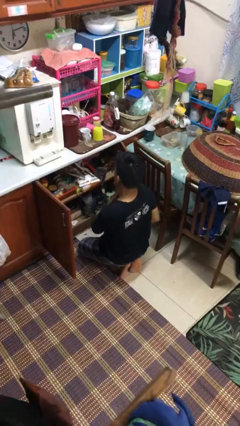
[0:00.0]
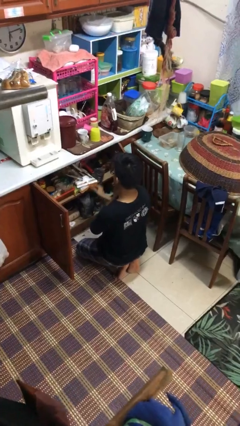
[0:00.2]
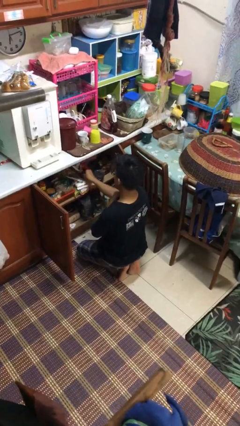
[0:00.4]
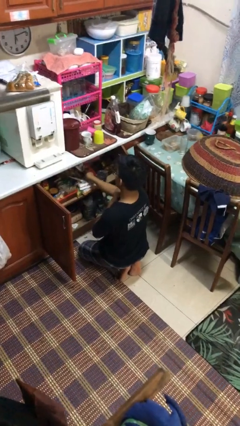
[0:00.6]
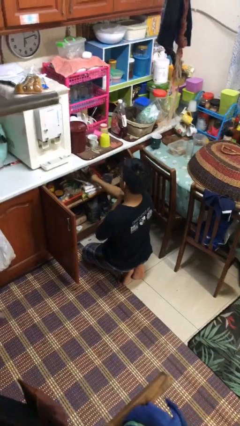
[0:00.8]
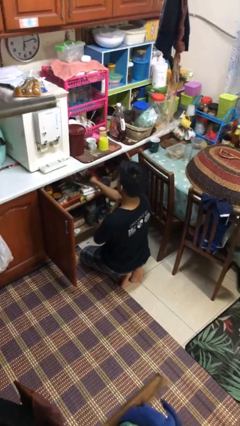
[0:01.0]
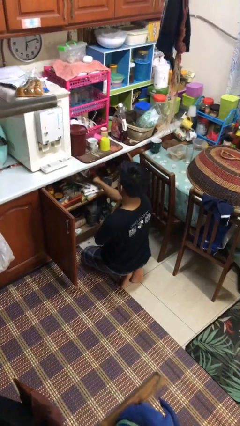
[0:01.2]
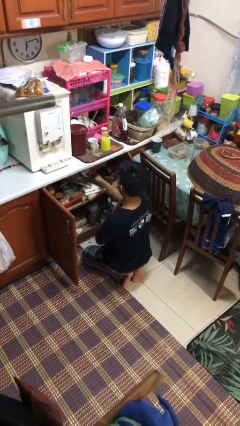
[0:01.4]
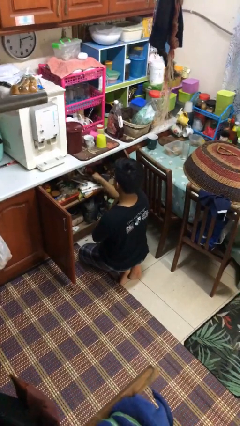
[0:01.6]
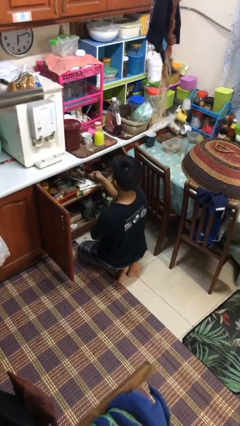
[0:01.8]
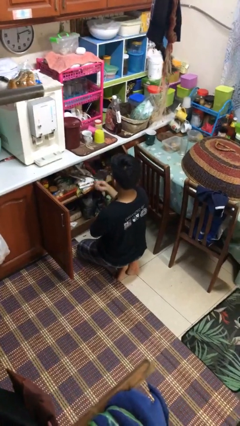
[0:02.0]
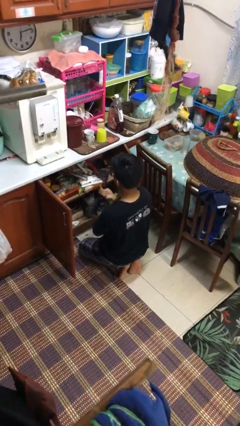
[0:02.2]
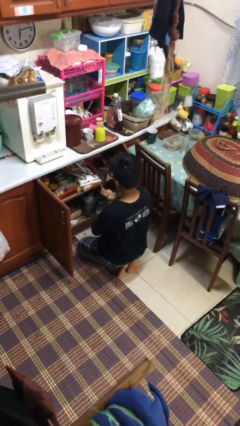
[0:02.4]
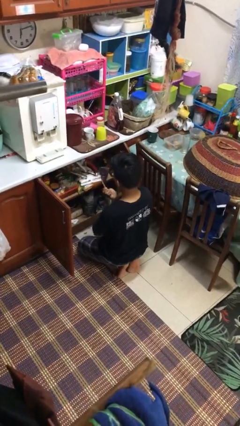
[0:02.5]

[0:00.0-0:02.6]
person takes object from kitchen drawer

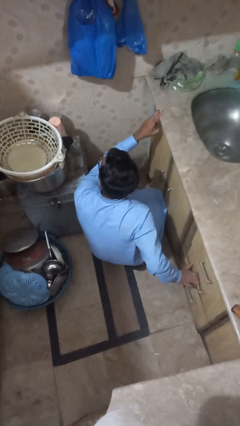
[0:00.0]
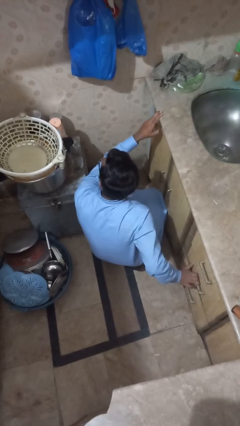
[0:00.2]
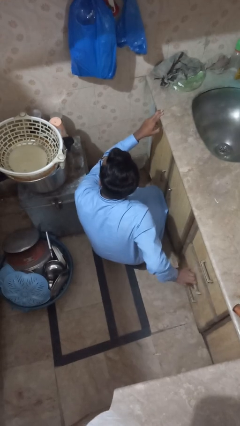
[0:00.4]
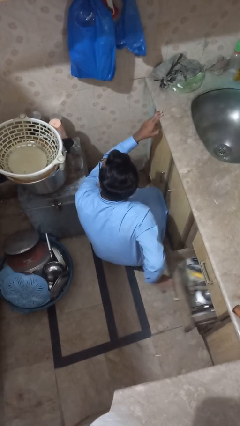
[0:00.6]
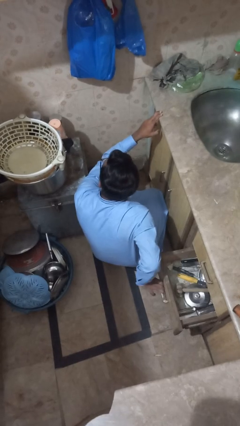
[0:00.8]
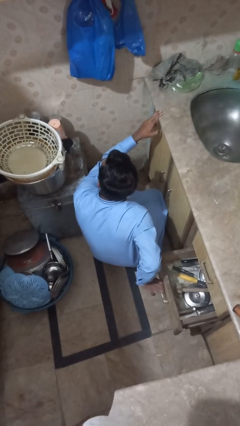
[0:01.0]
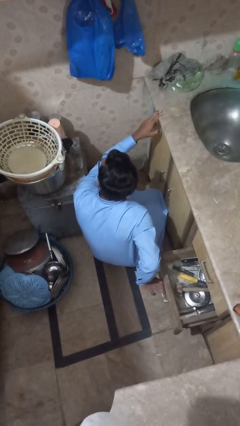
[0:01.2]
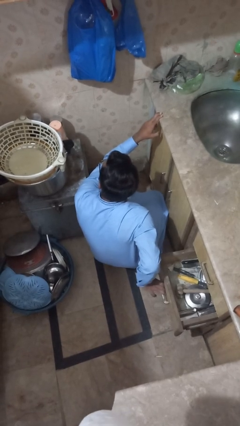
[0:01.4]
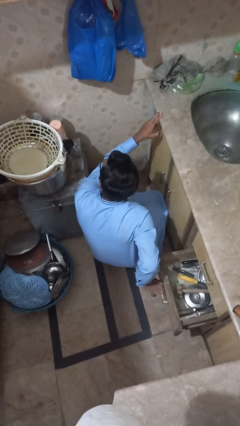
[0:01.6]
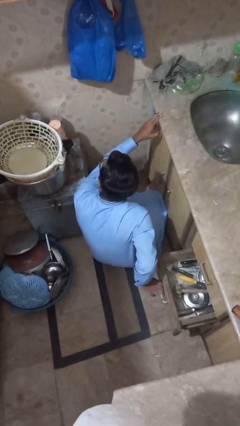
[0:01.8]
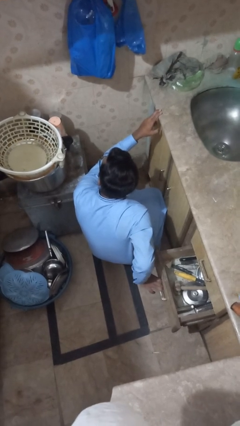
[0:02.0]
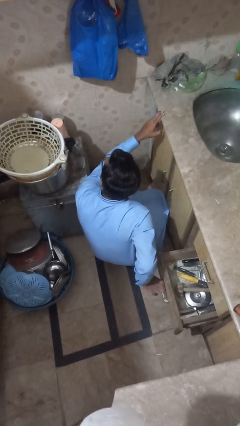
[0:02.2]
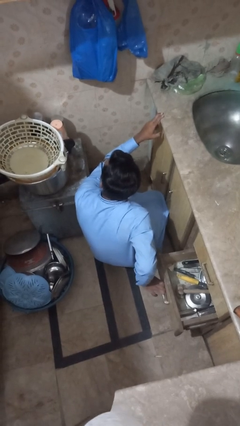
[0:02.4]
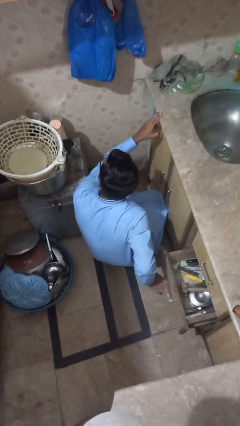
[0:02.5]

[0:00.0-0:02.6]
person opens kitchen drawer

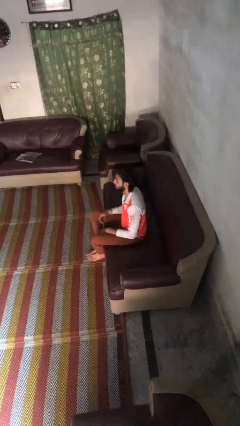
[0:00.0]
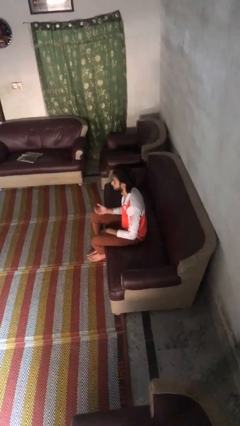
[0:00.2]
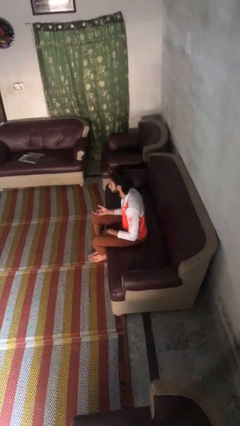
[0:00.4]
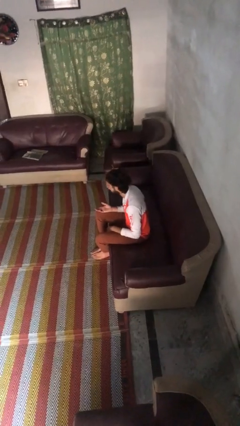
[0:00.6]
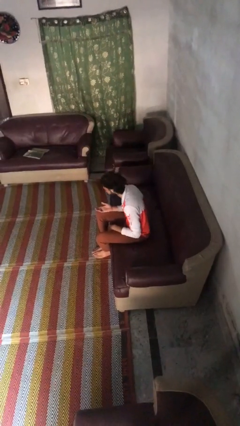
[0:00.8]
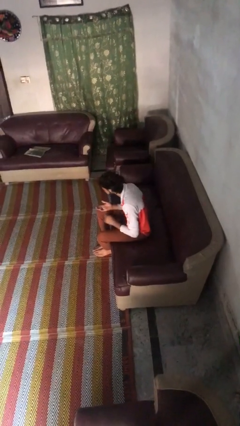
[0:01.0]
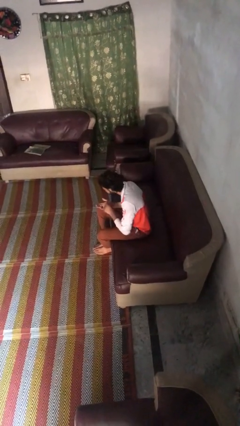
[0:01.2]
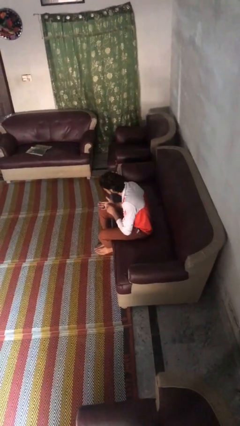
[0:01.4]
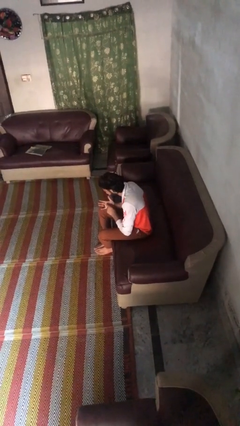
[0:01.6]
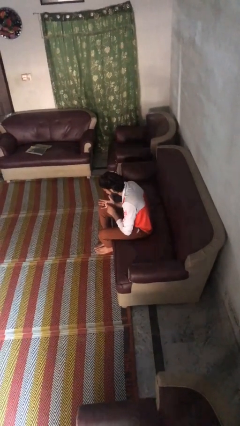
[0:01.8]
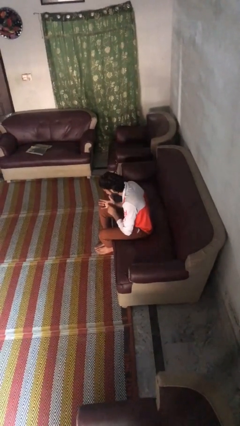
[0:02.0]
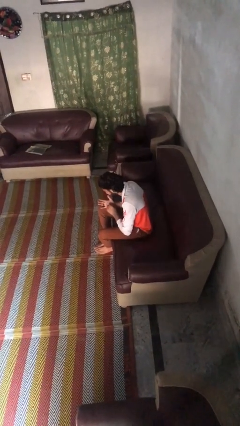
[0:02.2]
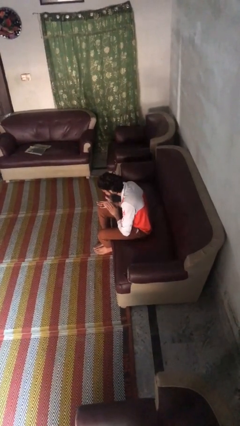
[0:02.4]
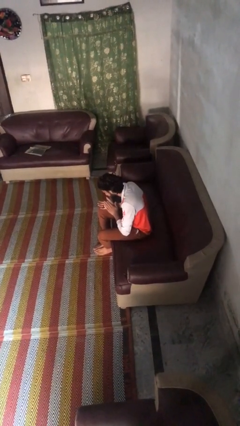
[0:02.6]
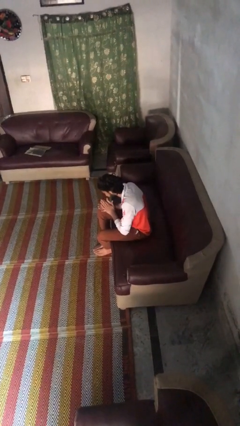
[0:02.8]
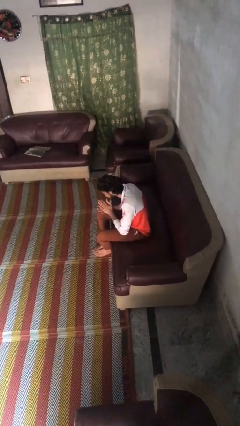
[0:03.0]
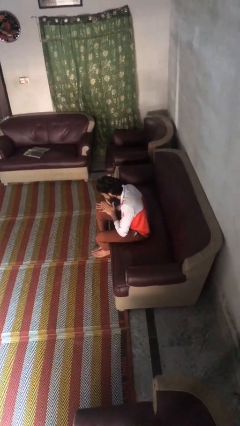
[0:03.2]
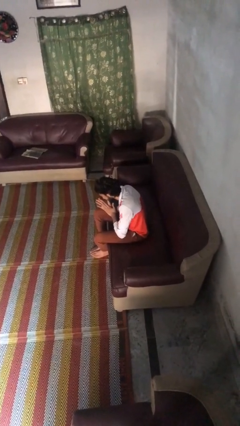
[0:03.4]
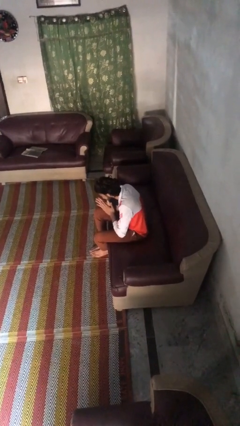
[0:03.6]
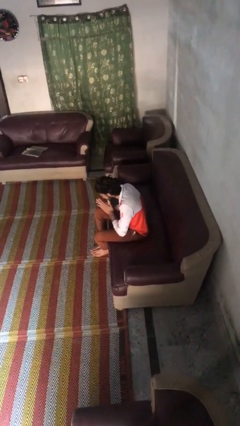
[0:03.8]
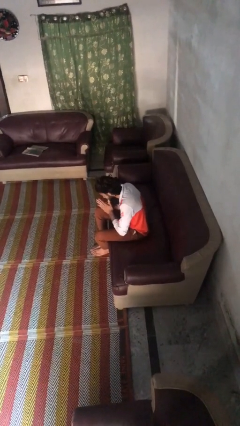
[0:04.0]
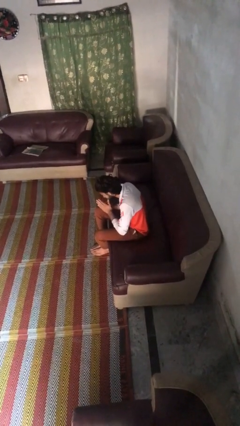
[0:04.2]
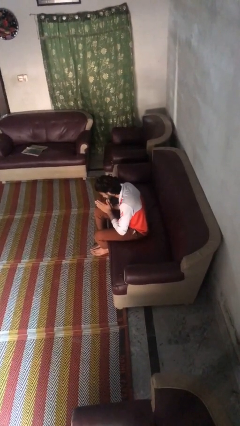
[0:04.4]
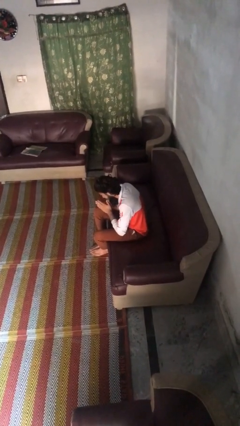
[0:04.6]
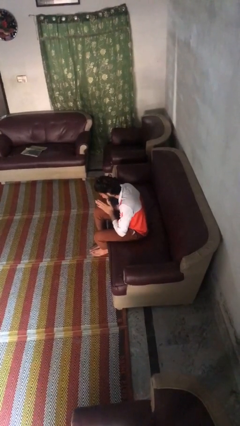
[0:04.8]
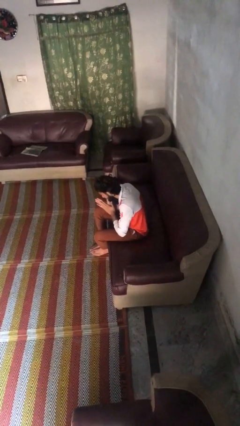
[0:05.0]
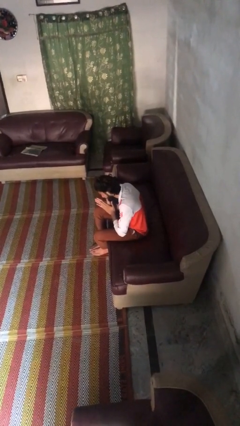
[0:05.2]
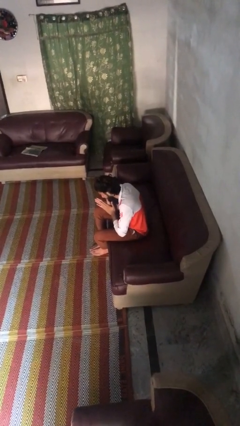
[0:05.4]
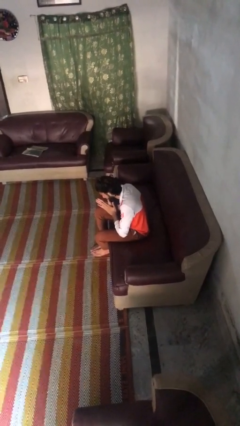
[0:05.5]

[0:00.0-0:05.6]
person looks at hands in lap

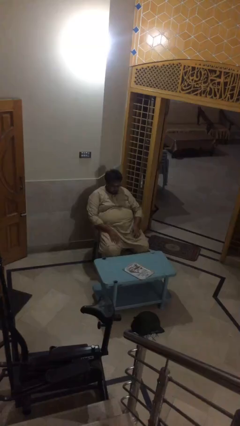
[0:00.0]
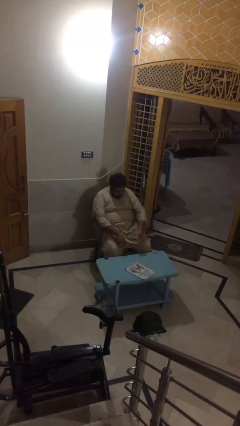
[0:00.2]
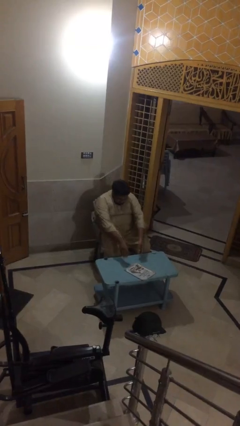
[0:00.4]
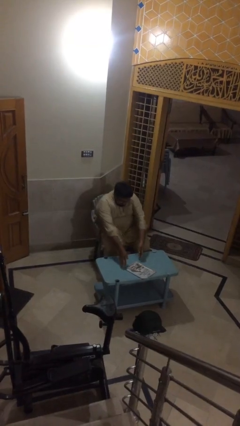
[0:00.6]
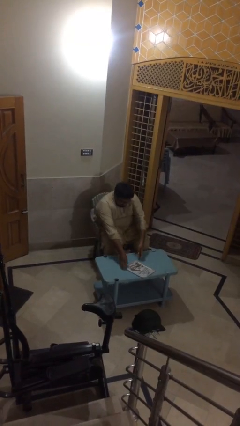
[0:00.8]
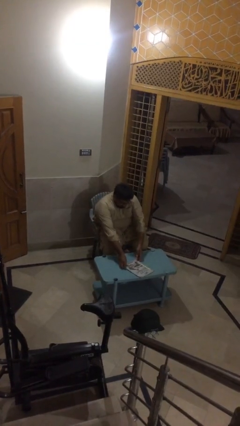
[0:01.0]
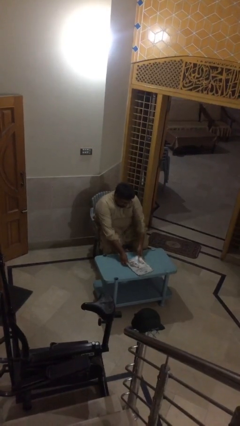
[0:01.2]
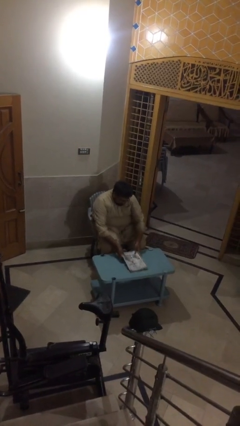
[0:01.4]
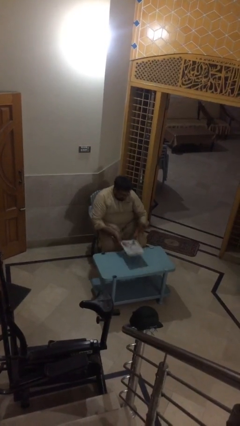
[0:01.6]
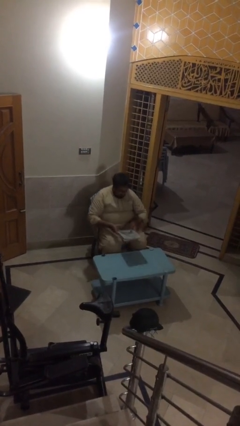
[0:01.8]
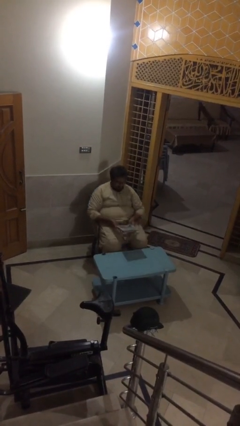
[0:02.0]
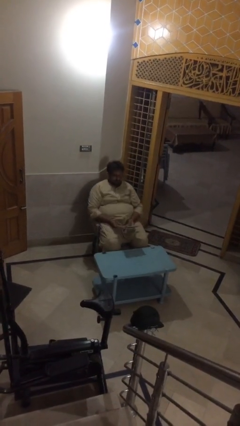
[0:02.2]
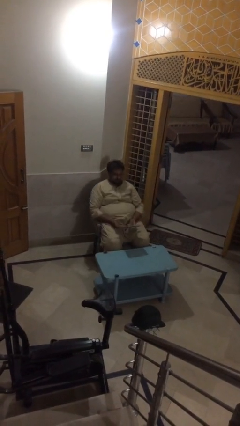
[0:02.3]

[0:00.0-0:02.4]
person picks up object from table

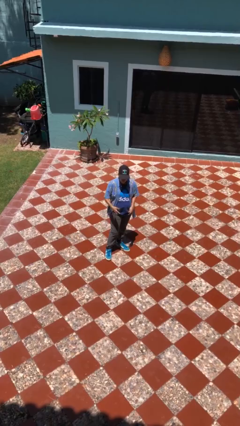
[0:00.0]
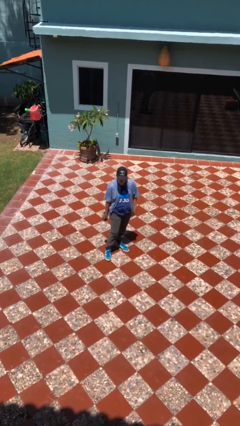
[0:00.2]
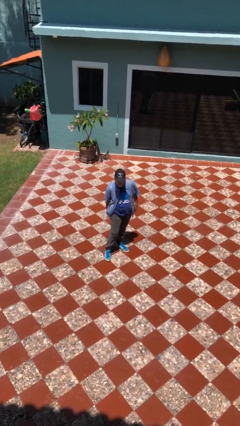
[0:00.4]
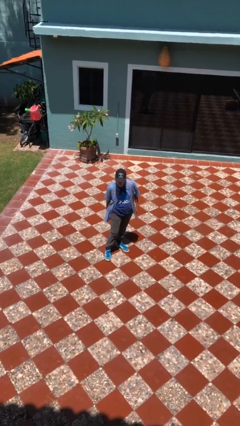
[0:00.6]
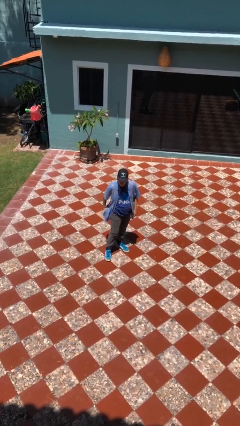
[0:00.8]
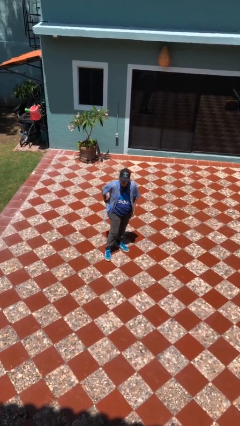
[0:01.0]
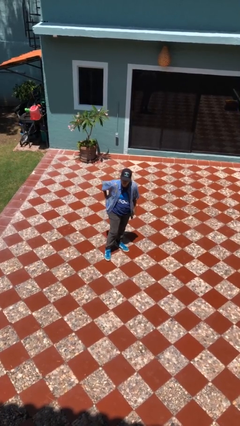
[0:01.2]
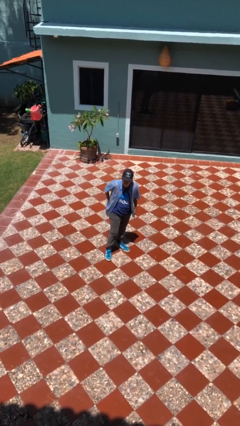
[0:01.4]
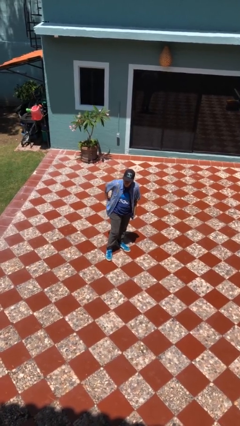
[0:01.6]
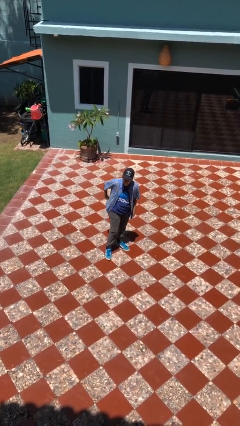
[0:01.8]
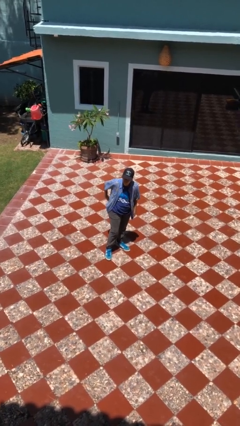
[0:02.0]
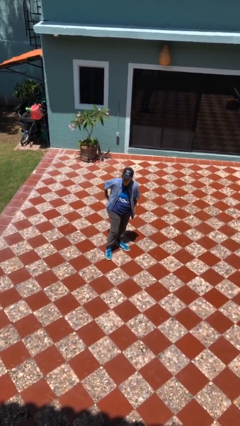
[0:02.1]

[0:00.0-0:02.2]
person puts phone into pocket

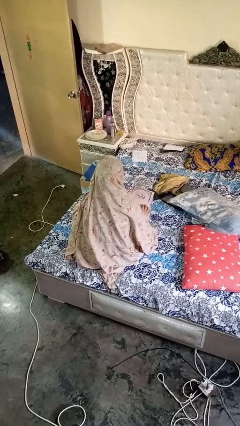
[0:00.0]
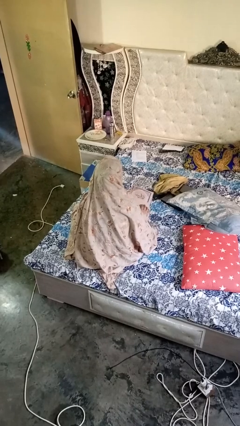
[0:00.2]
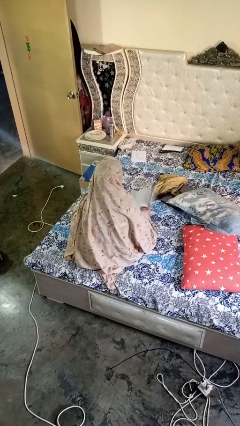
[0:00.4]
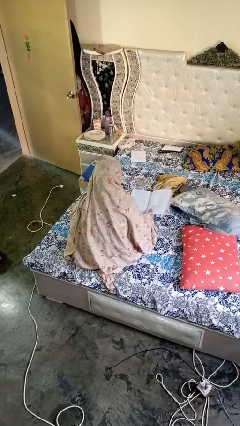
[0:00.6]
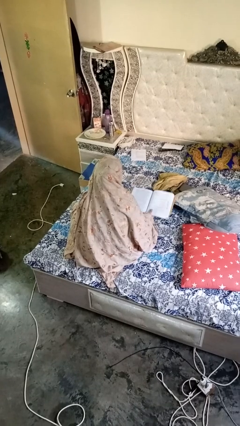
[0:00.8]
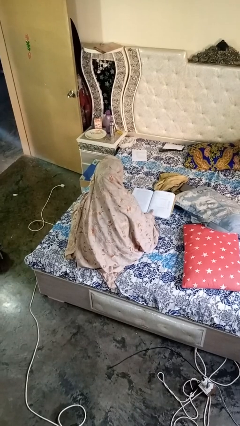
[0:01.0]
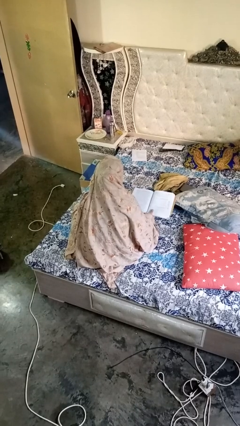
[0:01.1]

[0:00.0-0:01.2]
person reads book

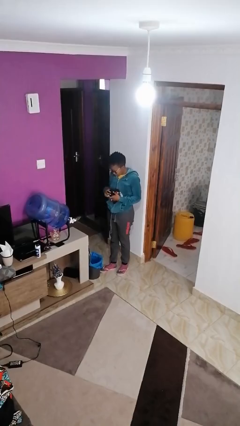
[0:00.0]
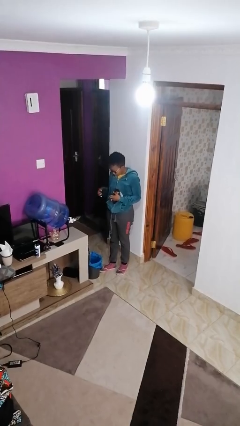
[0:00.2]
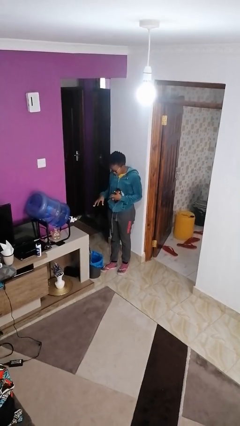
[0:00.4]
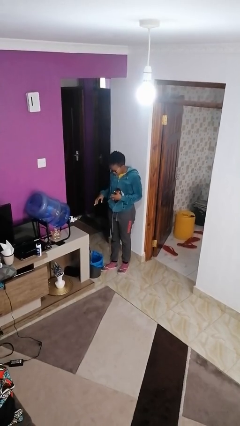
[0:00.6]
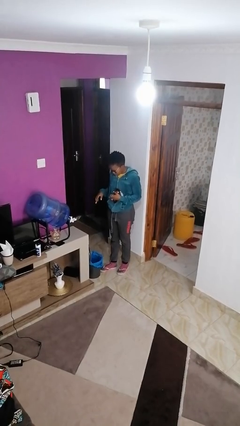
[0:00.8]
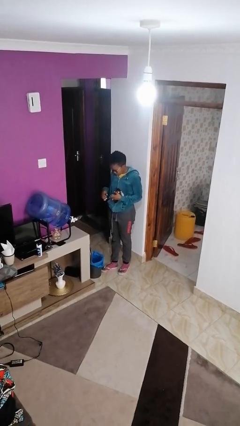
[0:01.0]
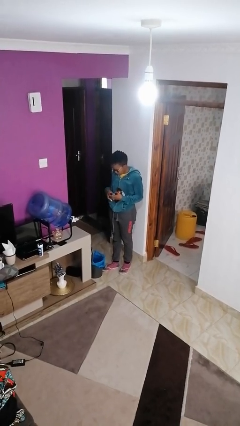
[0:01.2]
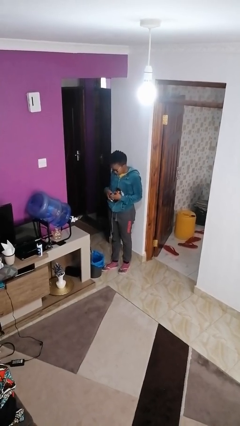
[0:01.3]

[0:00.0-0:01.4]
person discards trash
